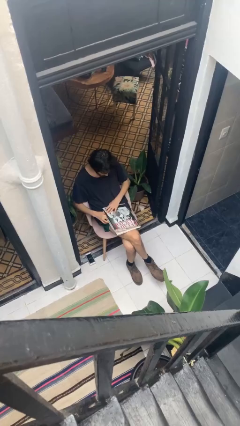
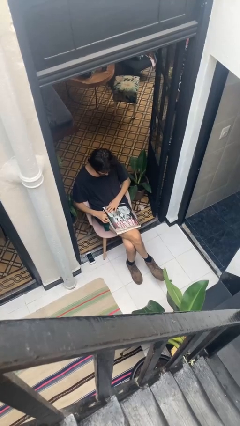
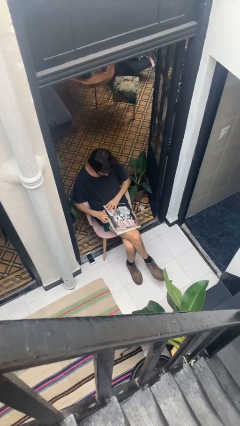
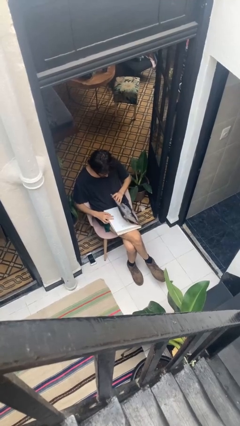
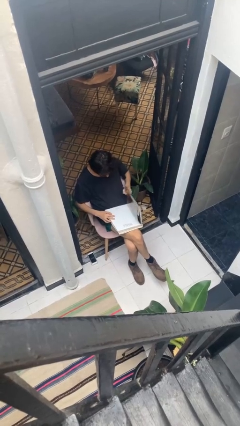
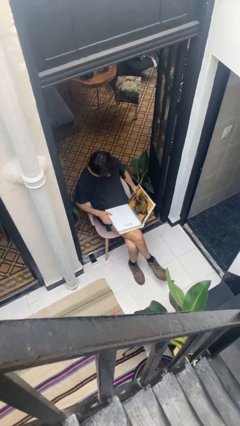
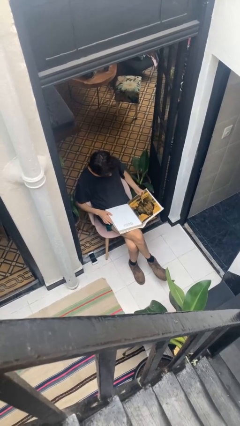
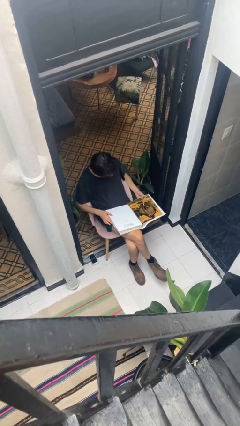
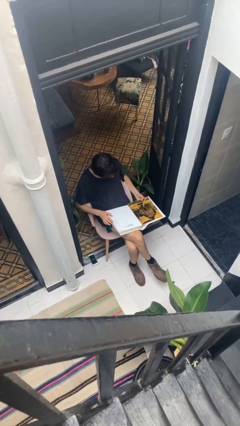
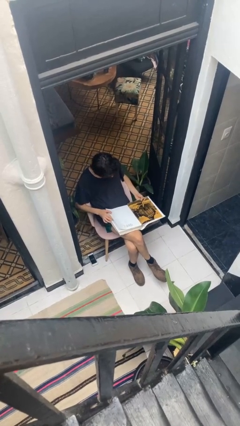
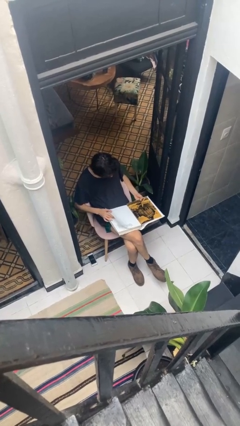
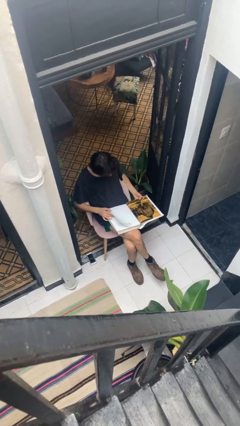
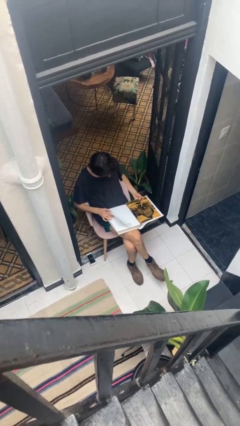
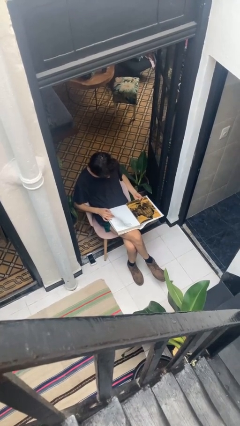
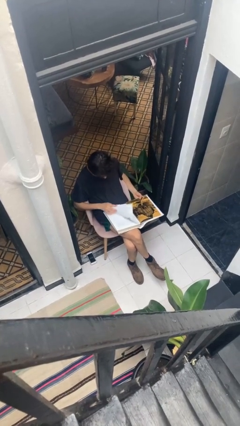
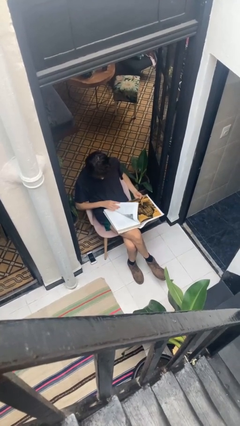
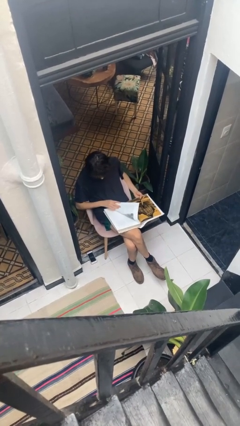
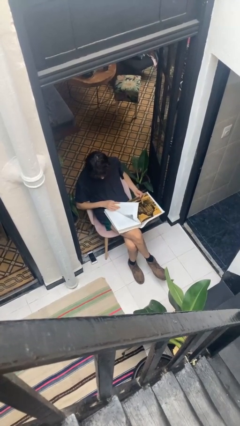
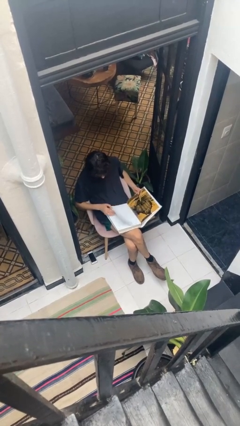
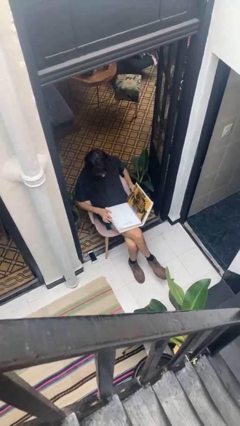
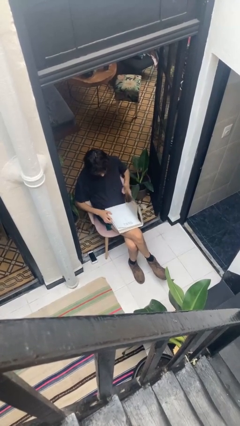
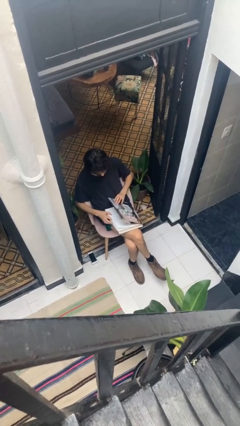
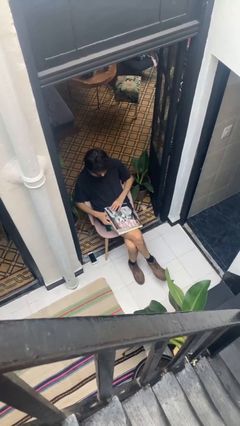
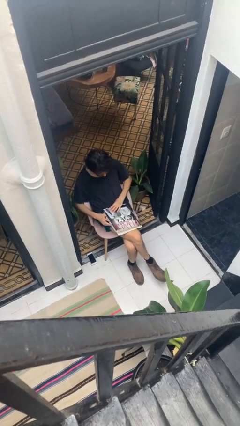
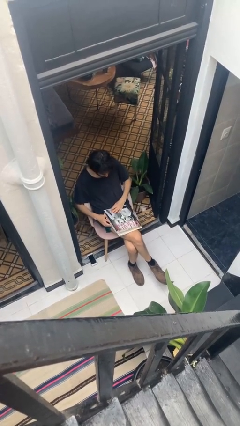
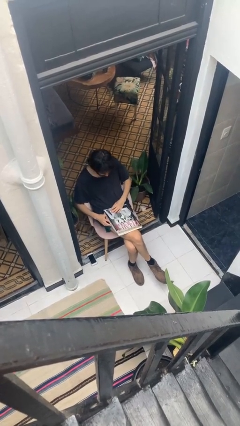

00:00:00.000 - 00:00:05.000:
person reads document

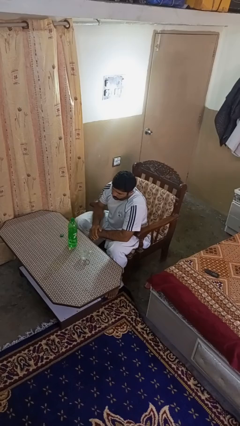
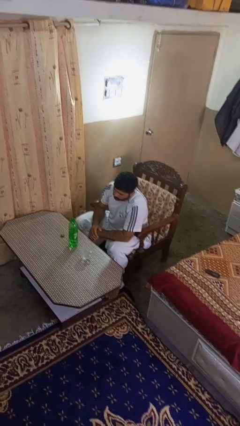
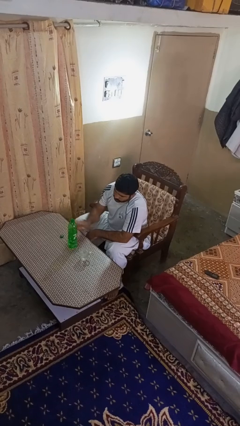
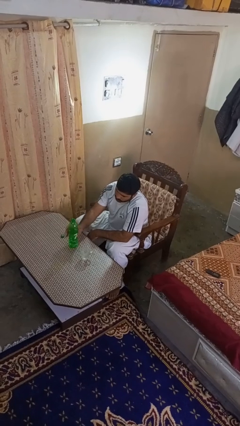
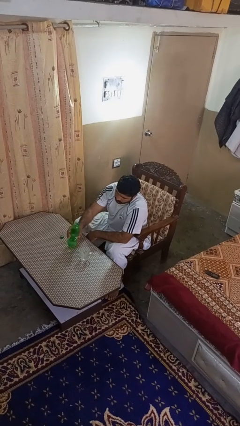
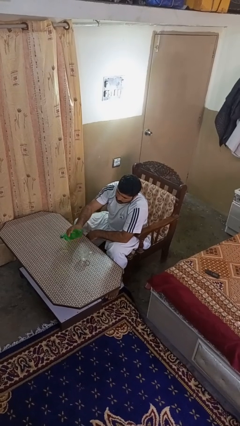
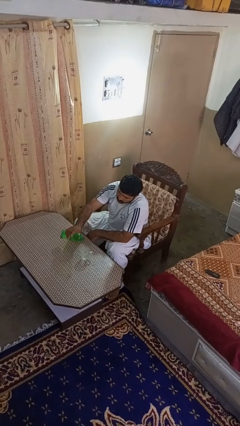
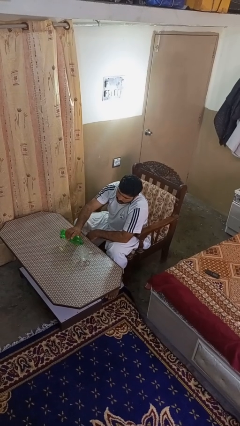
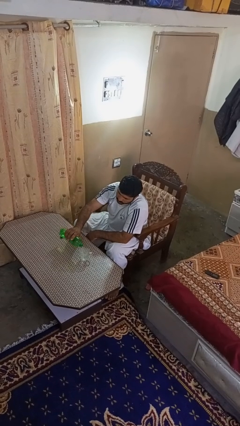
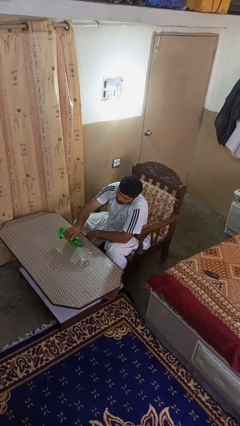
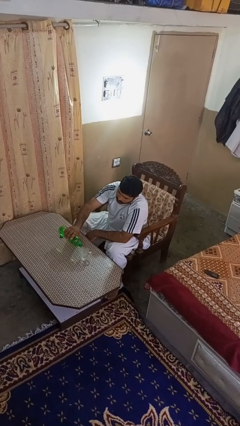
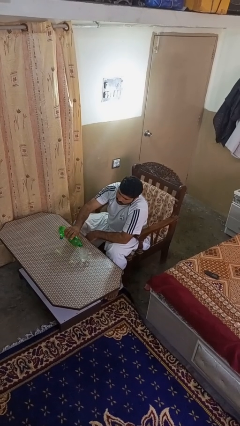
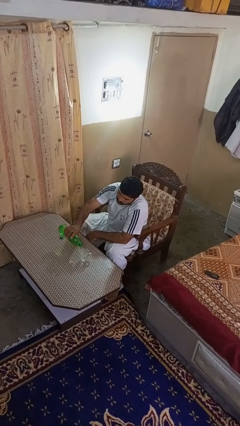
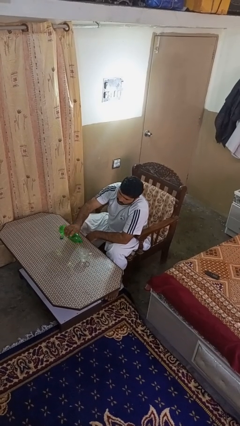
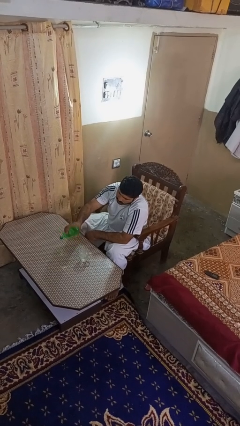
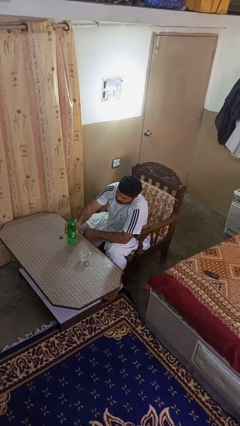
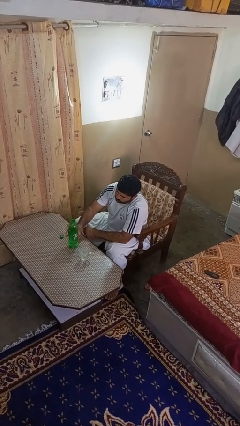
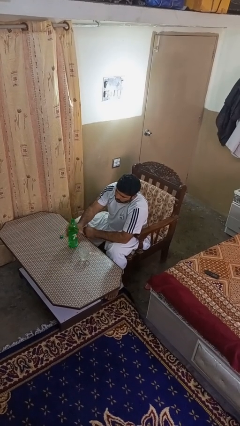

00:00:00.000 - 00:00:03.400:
person pours liquid into cup

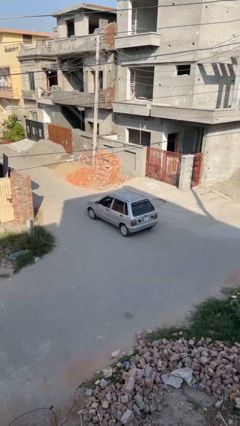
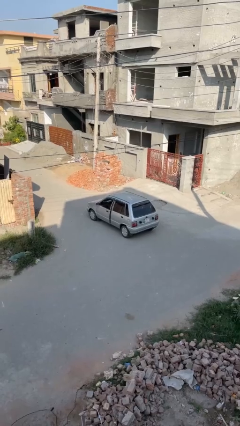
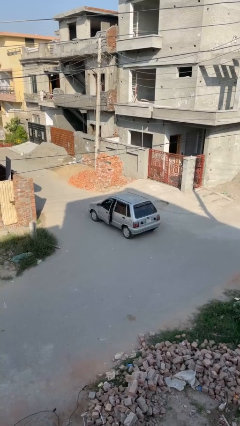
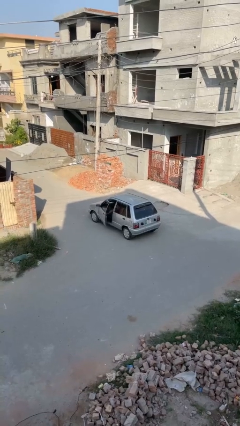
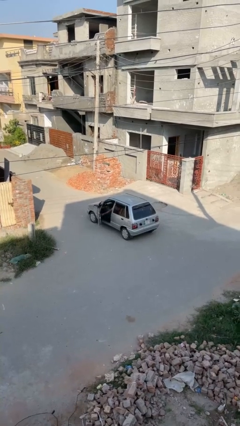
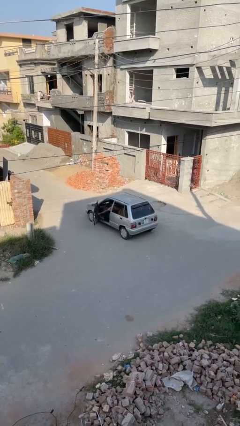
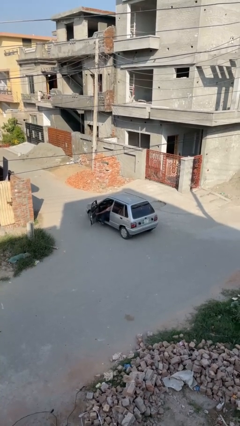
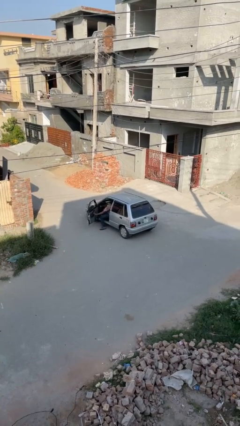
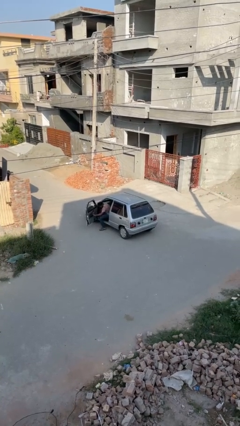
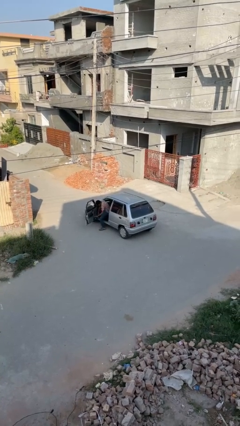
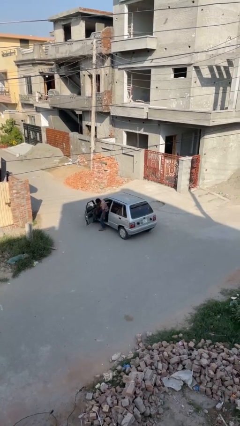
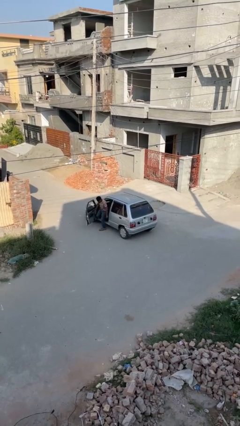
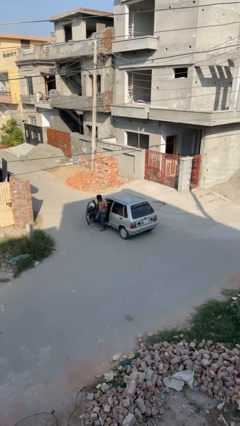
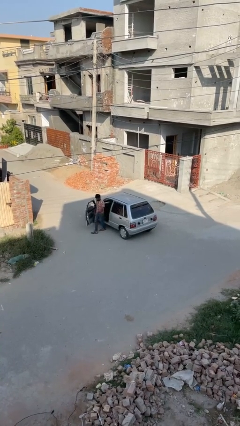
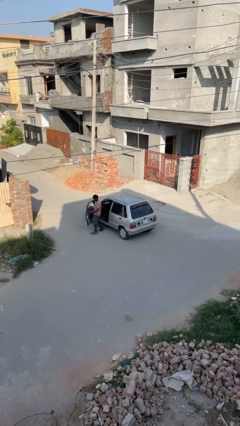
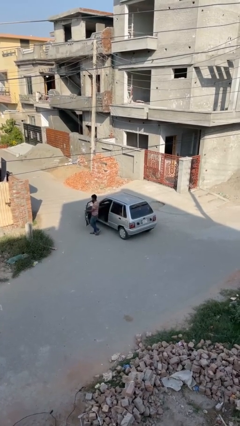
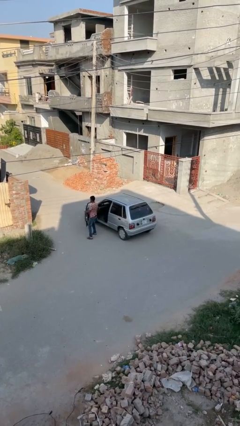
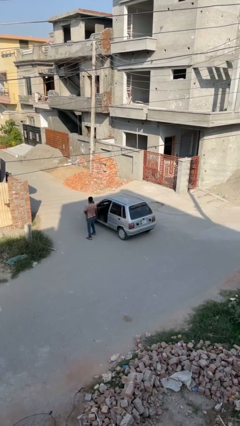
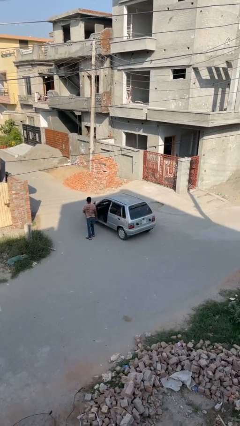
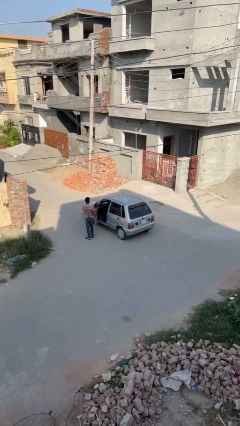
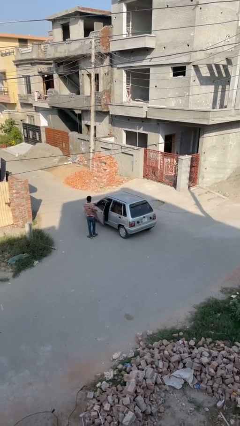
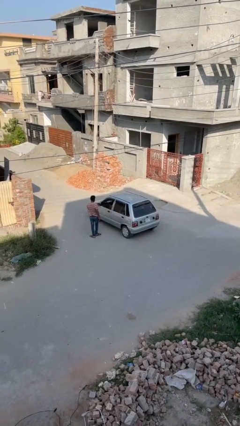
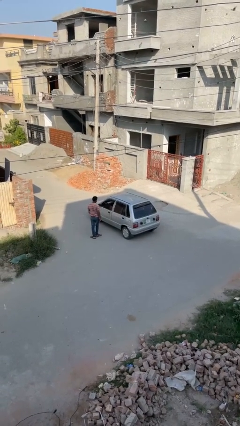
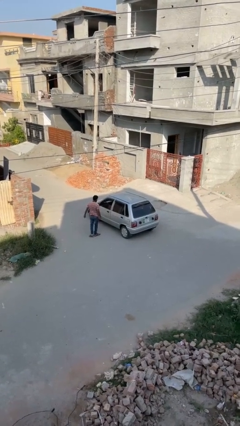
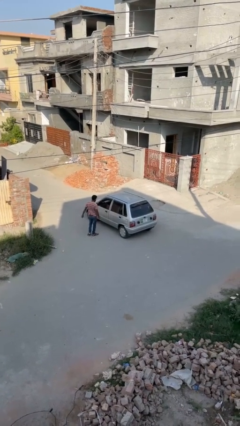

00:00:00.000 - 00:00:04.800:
car drops off person

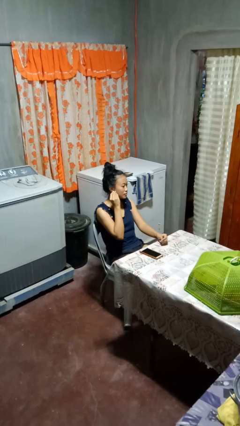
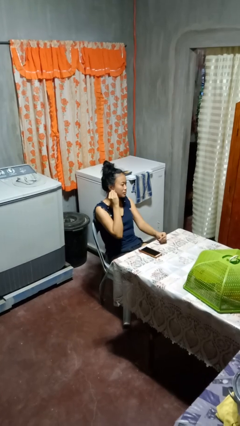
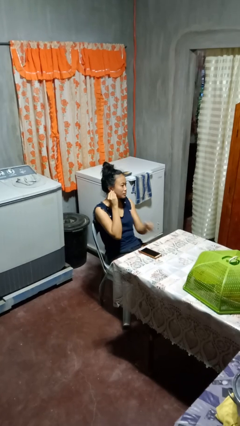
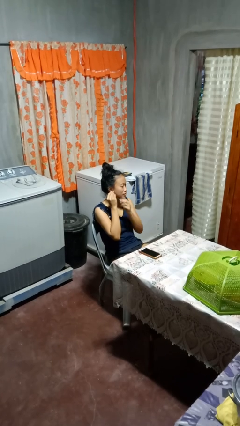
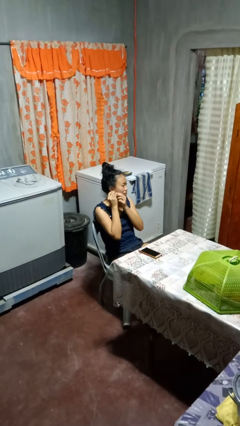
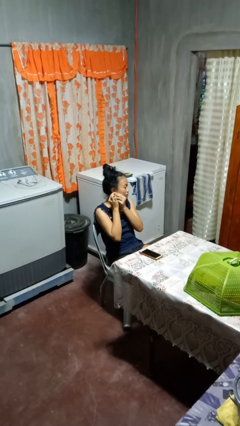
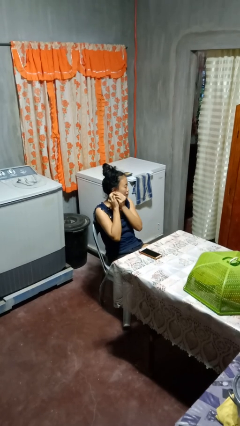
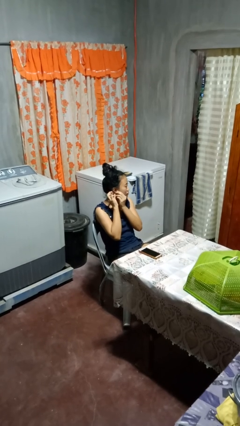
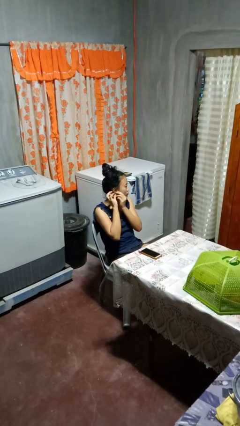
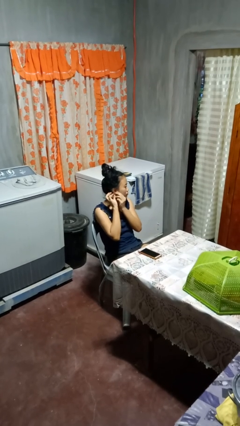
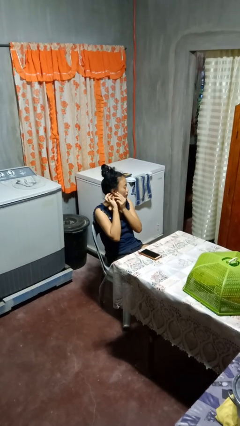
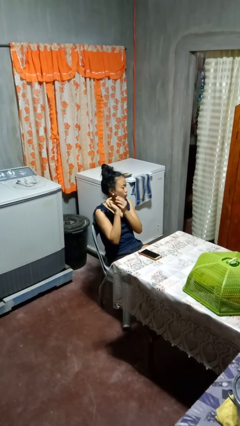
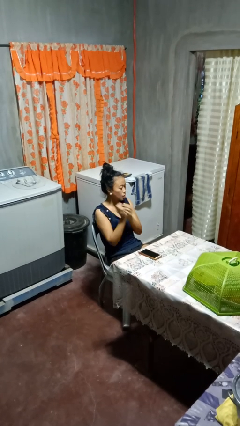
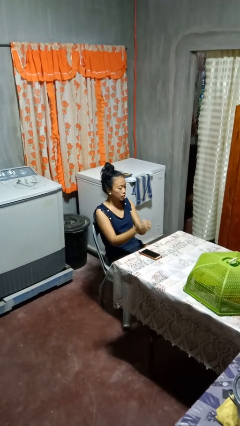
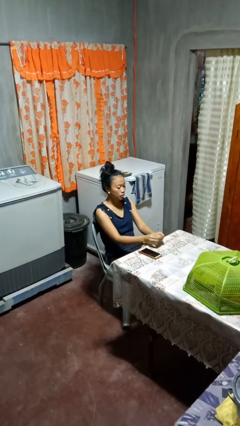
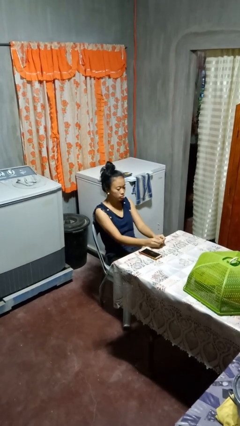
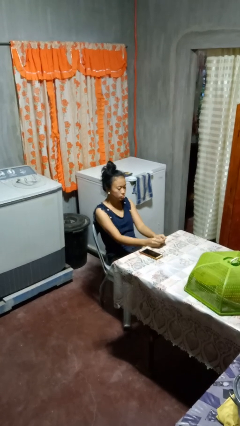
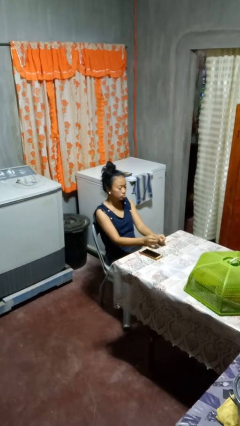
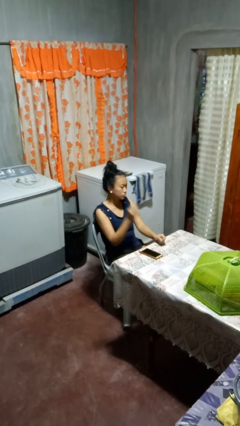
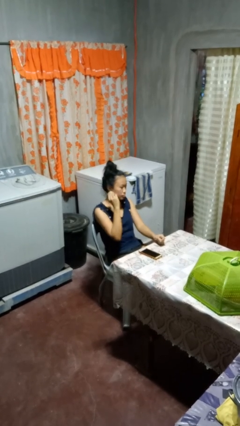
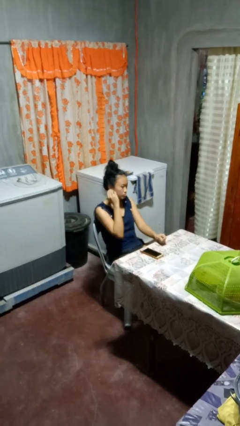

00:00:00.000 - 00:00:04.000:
person puts on earrings

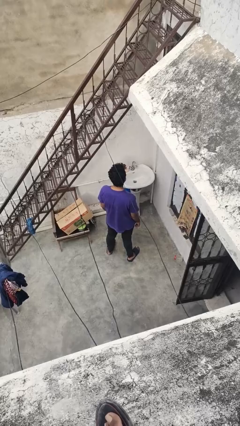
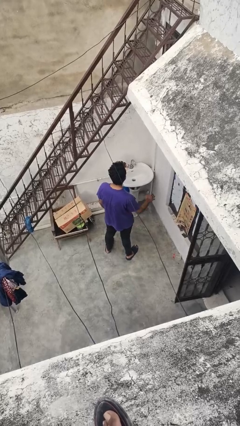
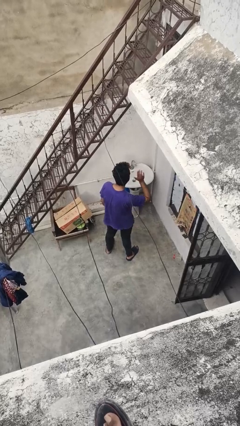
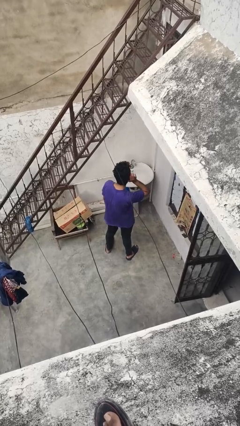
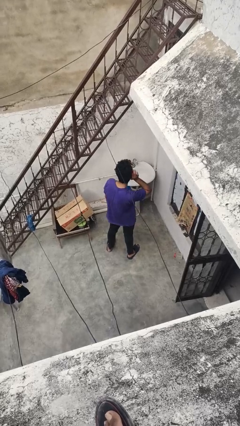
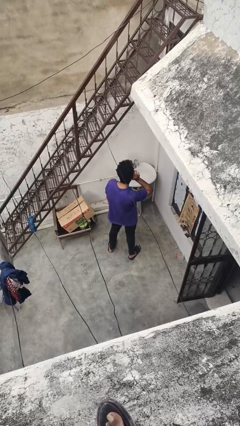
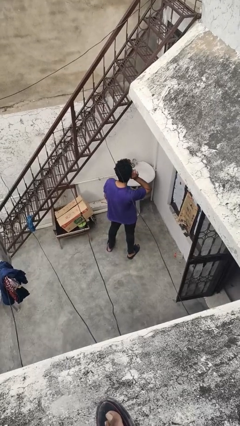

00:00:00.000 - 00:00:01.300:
person gestures listen closely
